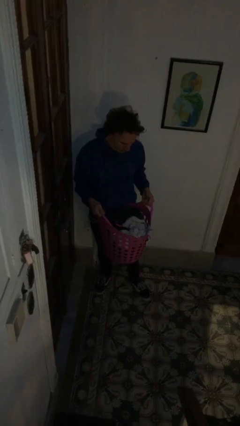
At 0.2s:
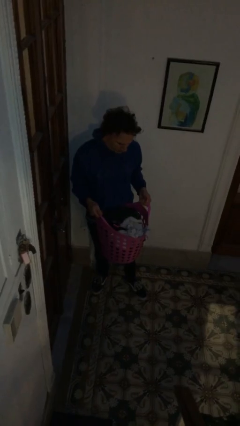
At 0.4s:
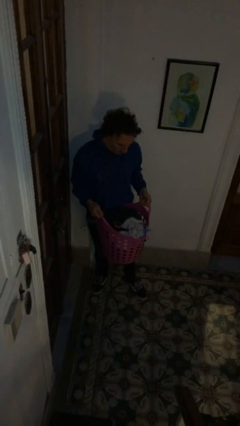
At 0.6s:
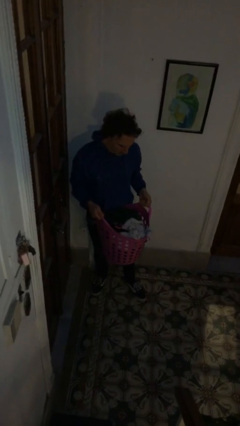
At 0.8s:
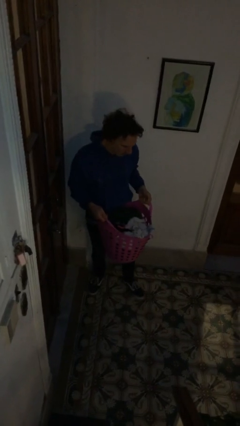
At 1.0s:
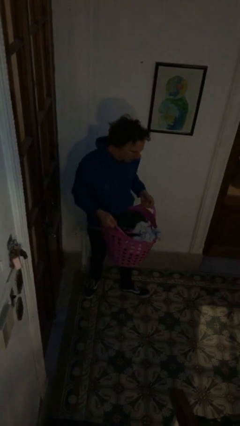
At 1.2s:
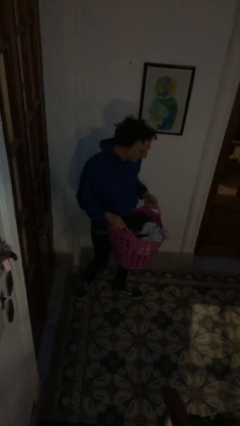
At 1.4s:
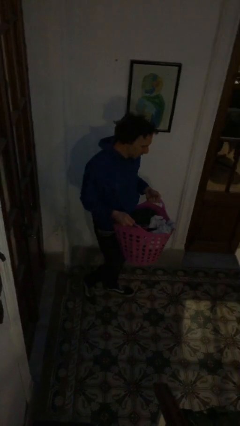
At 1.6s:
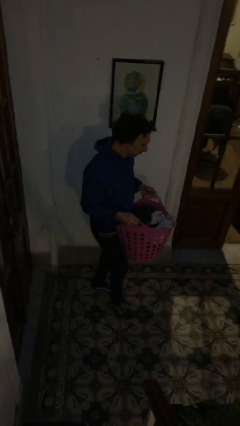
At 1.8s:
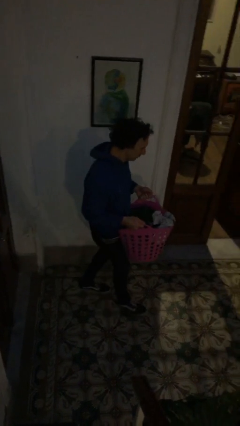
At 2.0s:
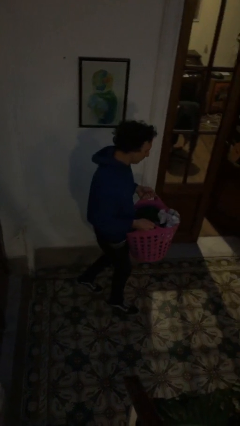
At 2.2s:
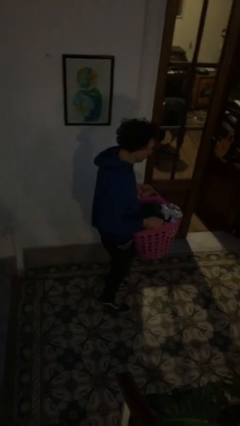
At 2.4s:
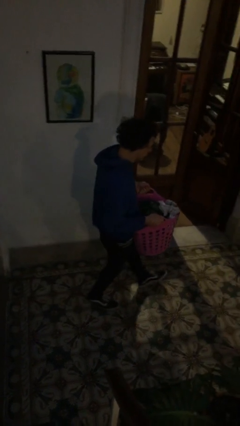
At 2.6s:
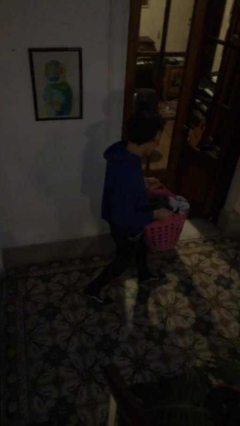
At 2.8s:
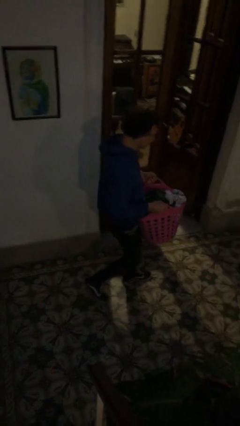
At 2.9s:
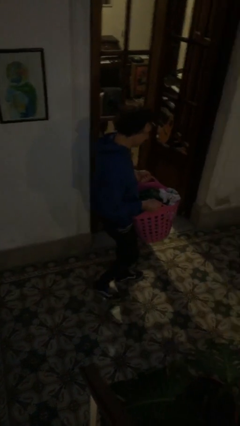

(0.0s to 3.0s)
person carries laundry basket

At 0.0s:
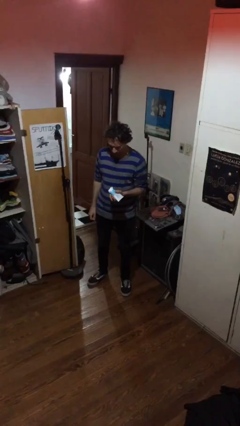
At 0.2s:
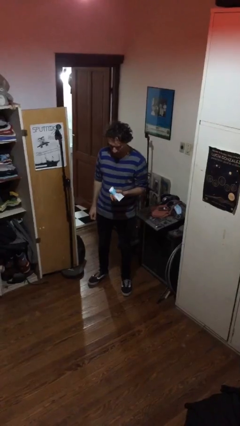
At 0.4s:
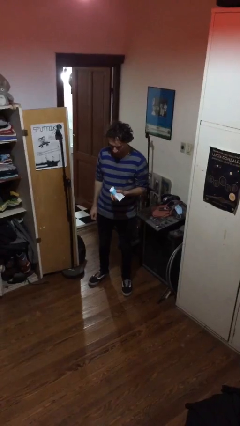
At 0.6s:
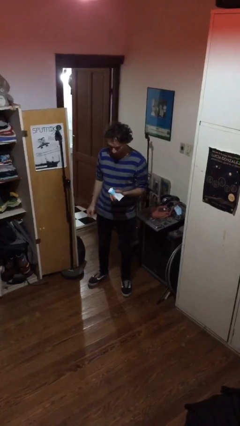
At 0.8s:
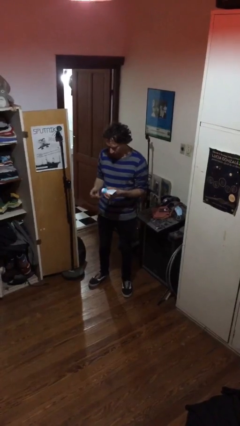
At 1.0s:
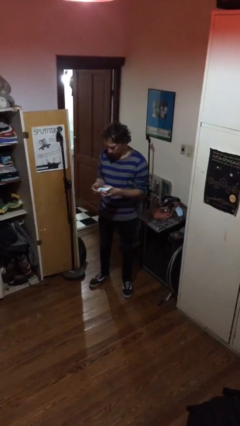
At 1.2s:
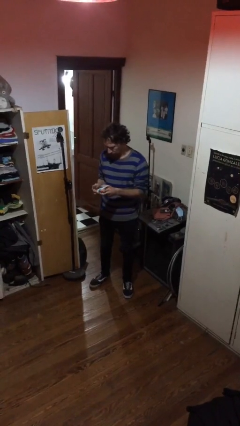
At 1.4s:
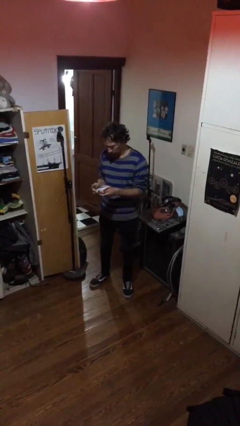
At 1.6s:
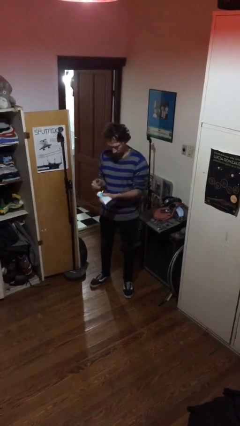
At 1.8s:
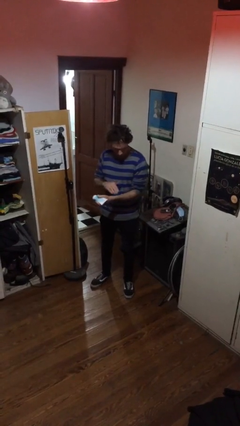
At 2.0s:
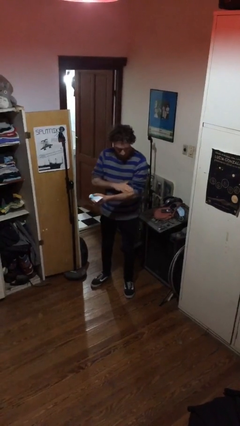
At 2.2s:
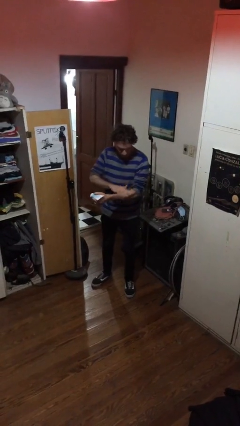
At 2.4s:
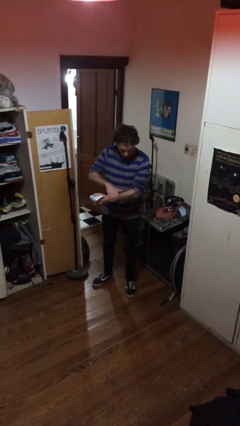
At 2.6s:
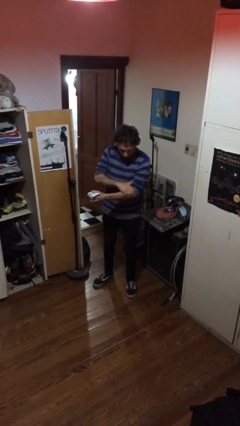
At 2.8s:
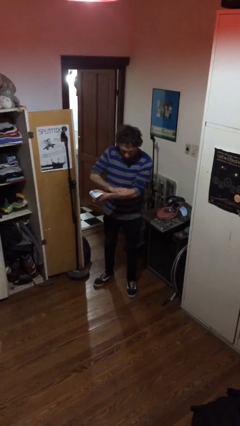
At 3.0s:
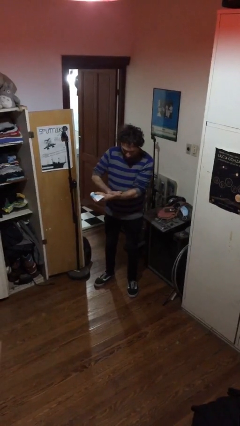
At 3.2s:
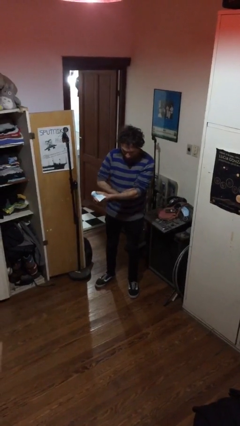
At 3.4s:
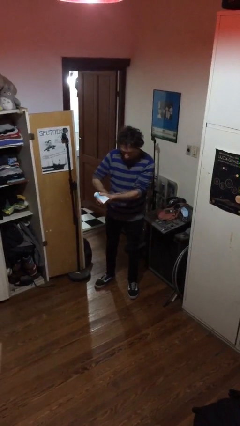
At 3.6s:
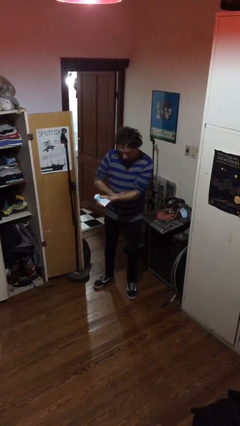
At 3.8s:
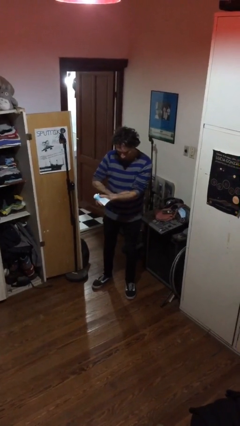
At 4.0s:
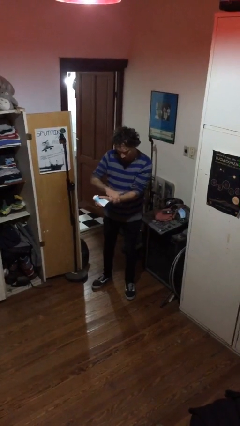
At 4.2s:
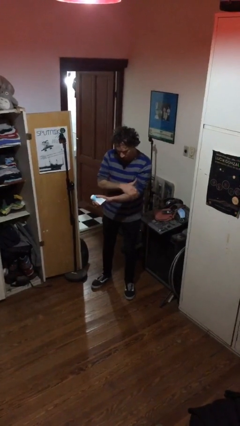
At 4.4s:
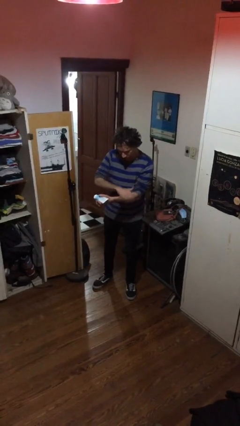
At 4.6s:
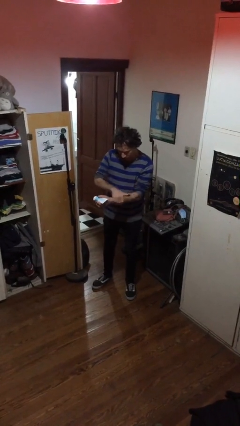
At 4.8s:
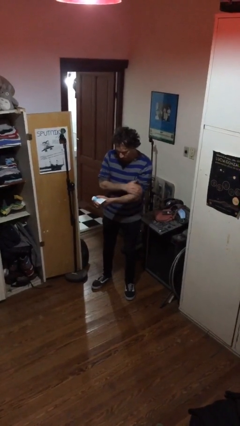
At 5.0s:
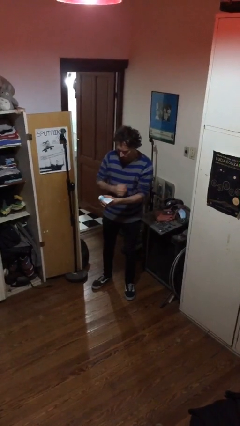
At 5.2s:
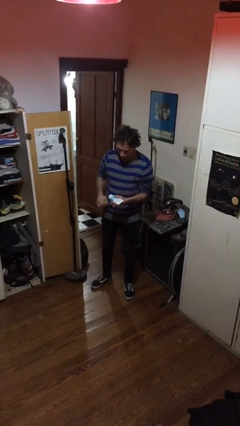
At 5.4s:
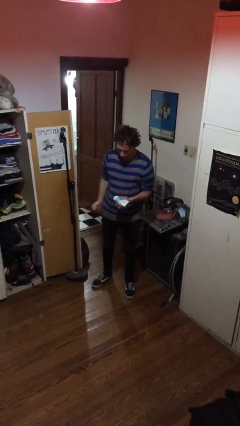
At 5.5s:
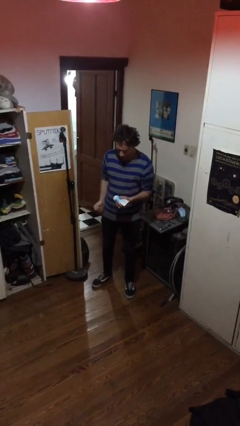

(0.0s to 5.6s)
person applies sunscreen

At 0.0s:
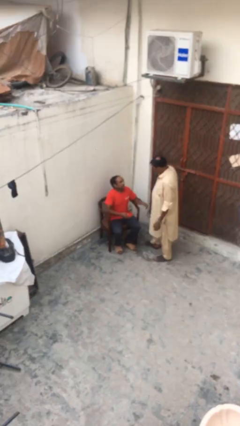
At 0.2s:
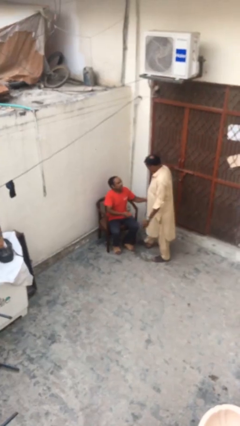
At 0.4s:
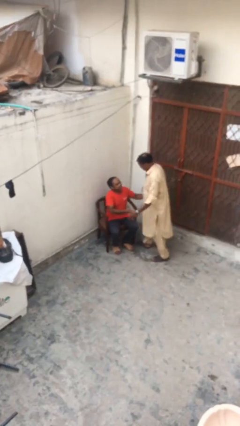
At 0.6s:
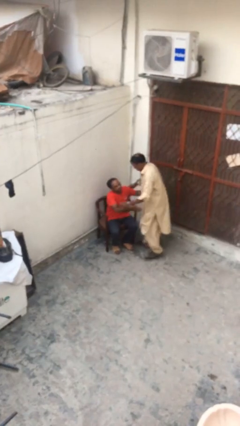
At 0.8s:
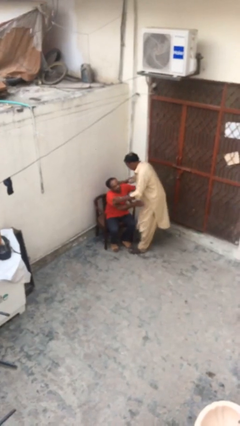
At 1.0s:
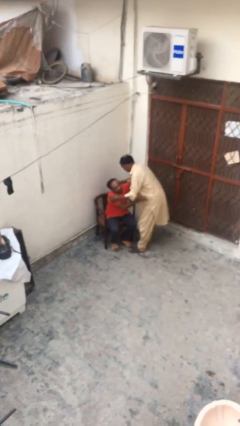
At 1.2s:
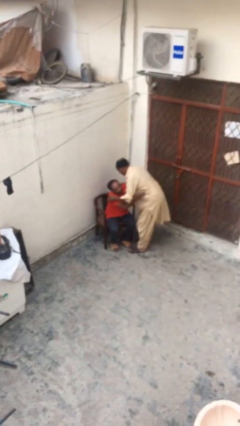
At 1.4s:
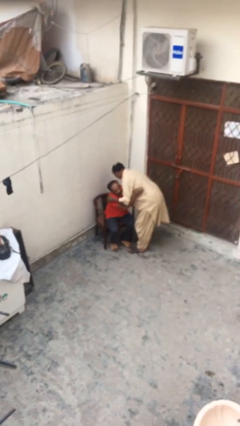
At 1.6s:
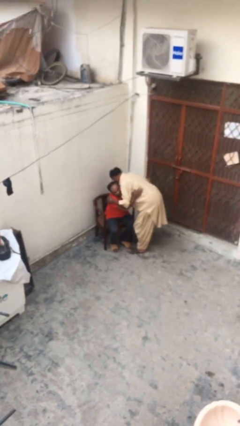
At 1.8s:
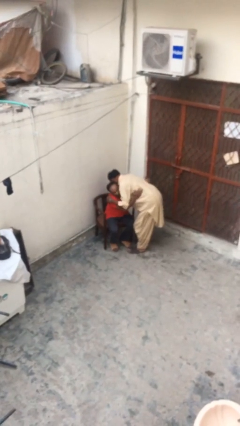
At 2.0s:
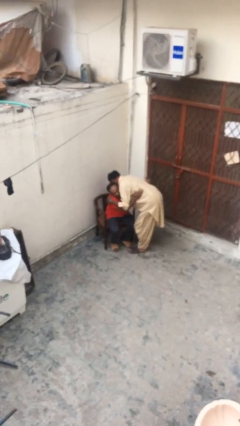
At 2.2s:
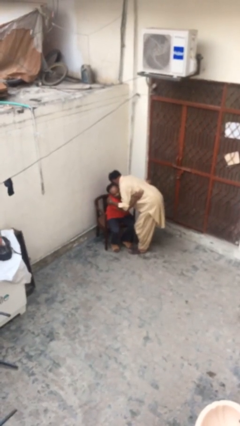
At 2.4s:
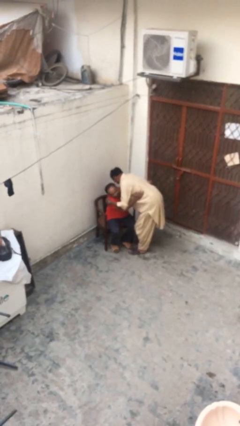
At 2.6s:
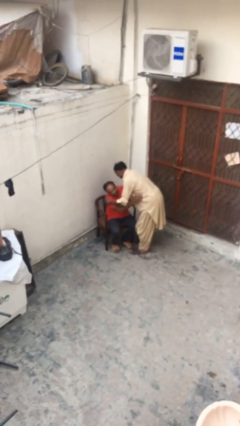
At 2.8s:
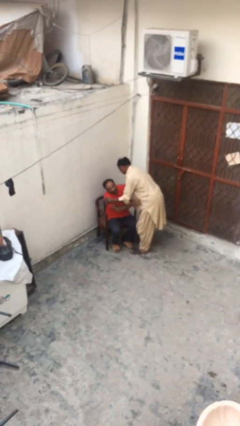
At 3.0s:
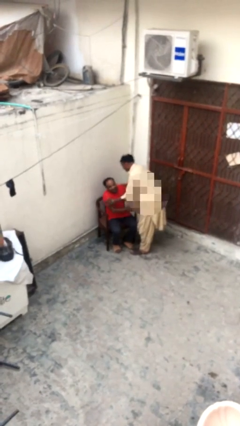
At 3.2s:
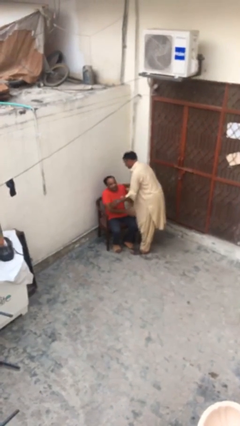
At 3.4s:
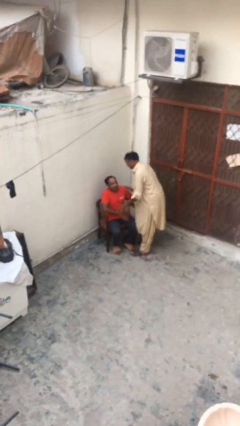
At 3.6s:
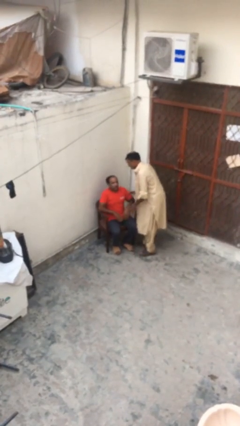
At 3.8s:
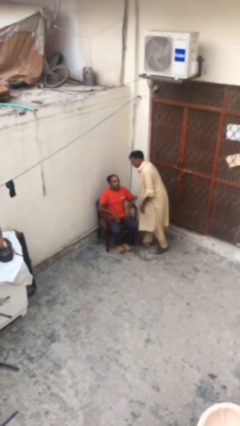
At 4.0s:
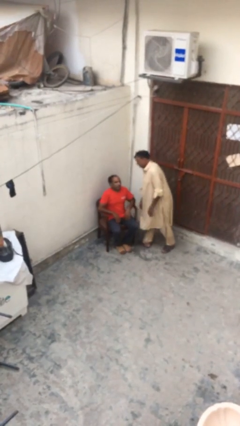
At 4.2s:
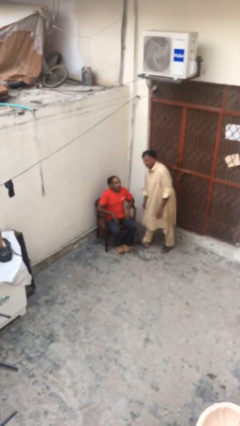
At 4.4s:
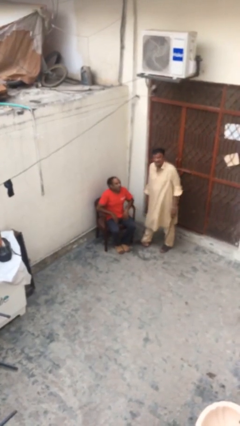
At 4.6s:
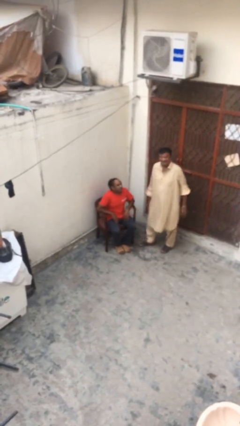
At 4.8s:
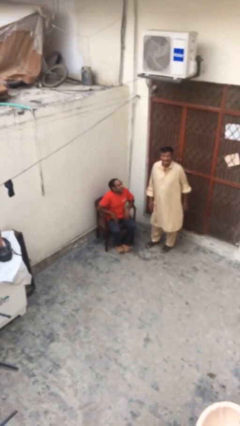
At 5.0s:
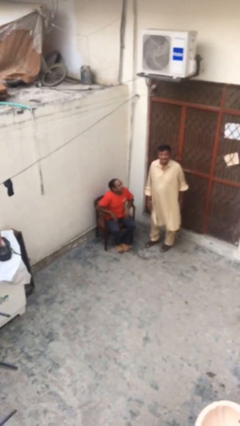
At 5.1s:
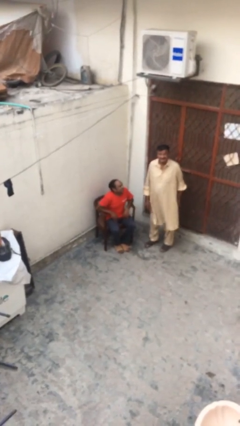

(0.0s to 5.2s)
person embraces person

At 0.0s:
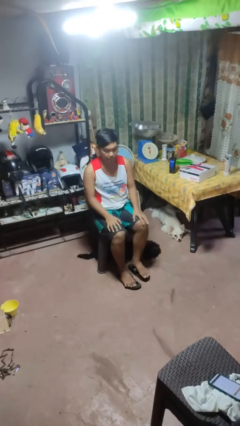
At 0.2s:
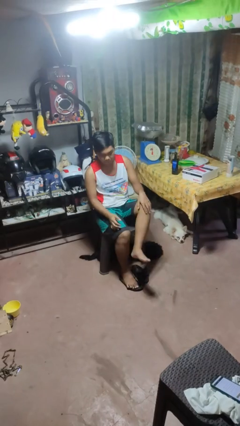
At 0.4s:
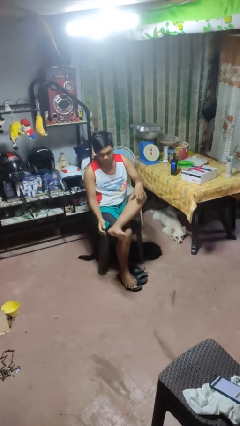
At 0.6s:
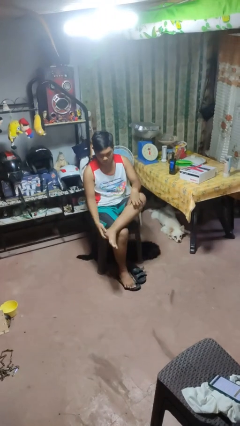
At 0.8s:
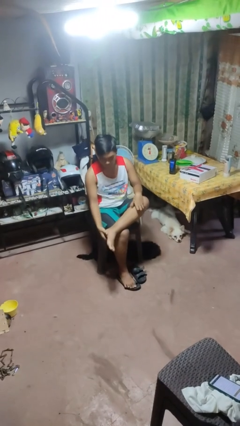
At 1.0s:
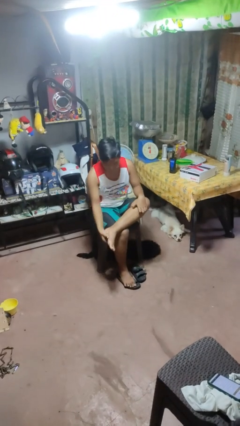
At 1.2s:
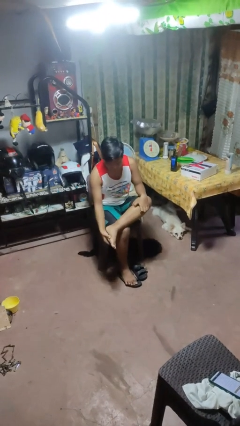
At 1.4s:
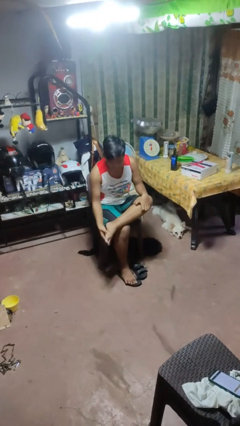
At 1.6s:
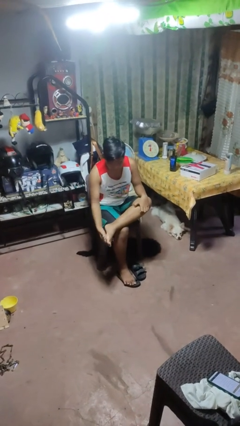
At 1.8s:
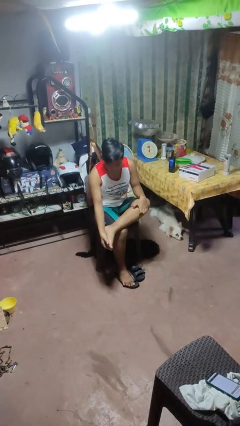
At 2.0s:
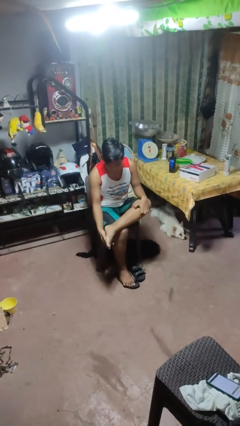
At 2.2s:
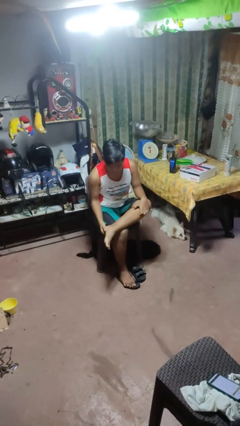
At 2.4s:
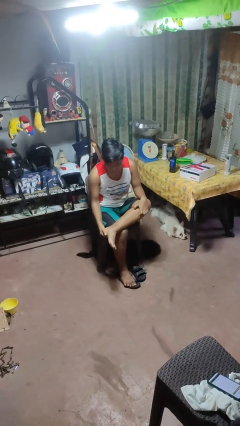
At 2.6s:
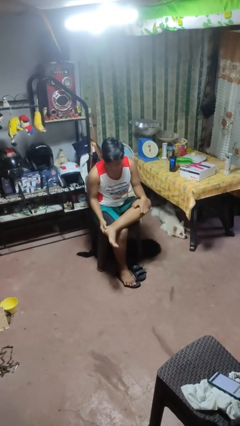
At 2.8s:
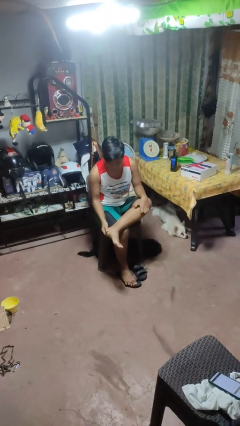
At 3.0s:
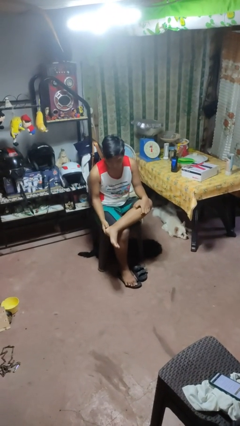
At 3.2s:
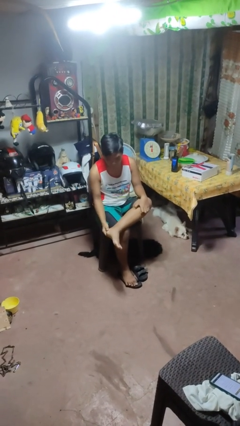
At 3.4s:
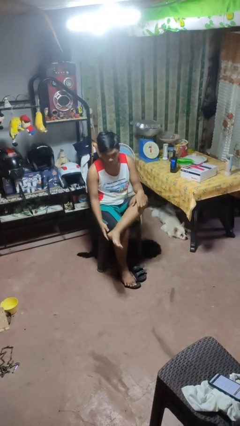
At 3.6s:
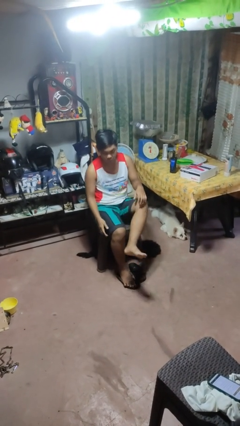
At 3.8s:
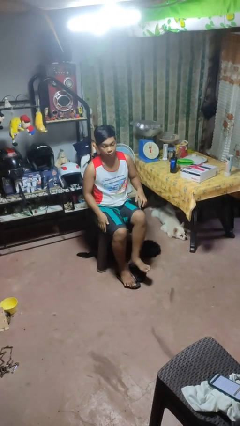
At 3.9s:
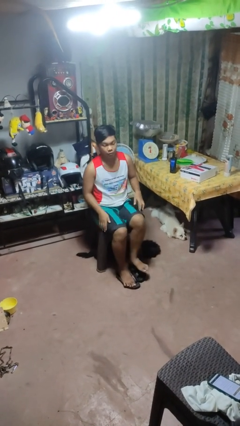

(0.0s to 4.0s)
person rubs foot
